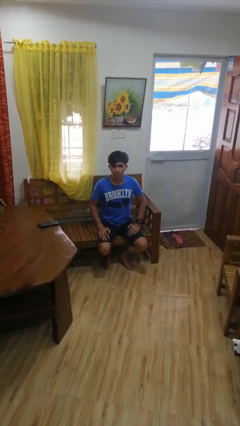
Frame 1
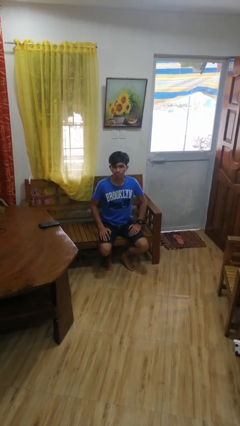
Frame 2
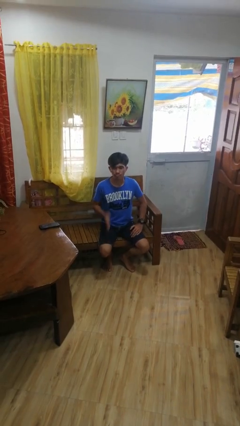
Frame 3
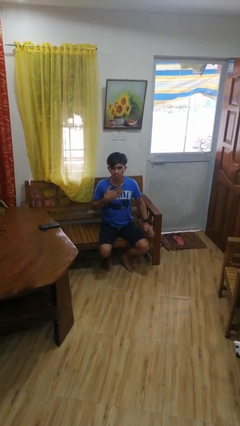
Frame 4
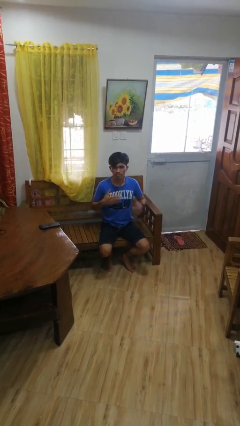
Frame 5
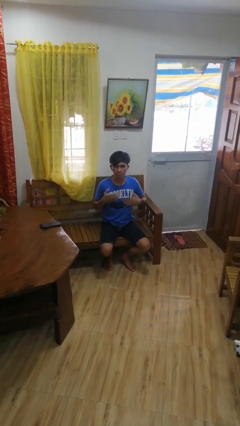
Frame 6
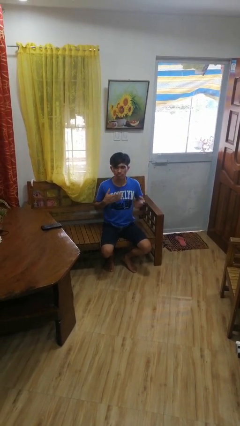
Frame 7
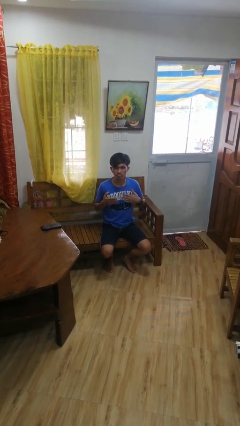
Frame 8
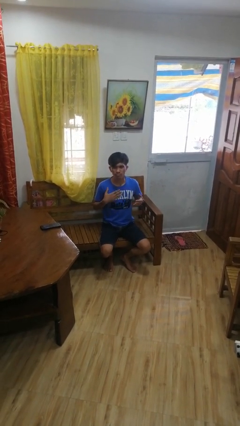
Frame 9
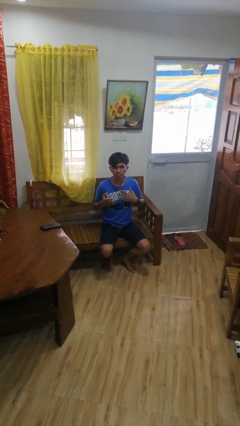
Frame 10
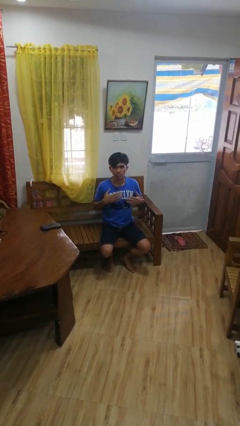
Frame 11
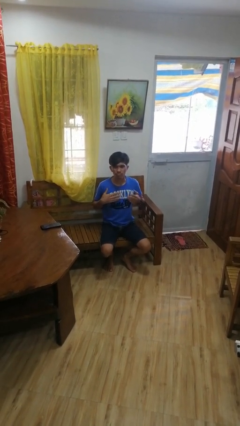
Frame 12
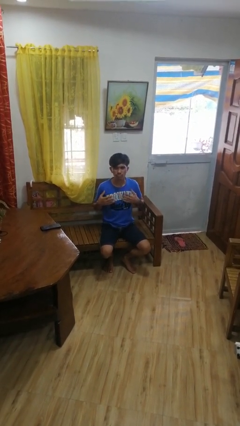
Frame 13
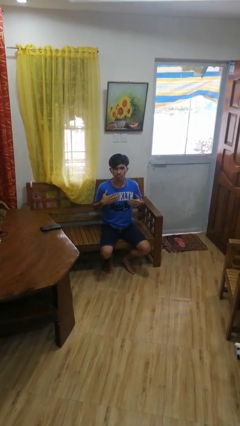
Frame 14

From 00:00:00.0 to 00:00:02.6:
person drums on chest

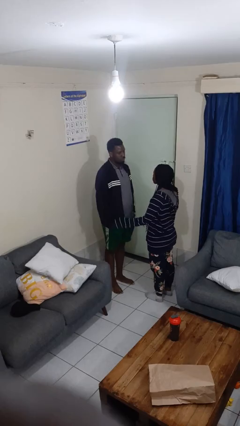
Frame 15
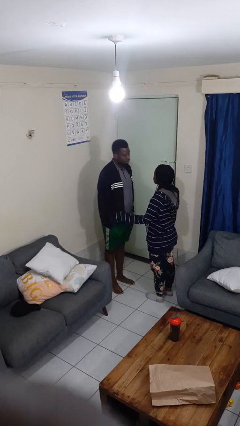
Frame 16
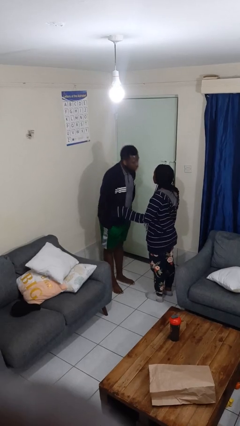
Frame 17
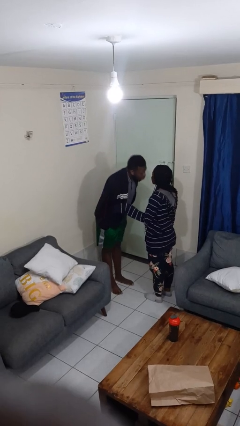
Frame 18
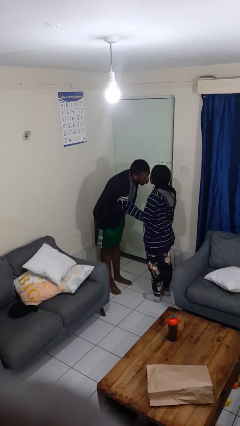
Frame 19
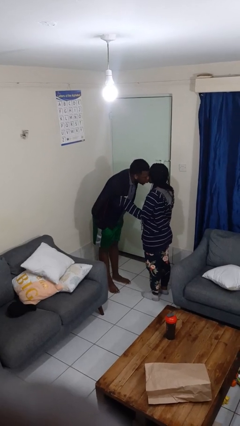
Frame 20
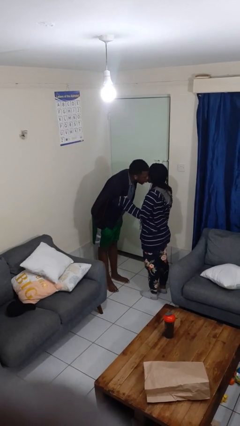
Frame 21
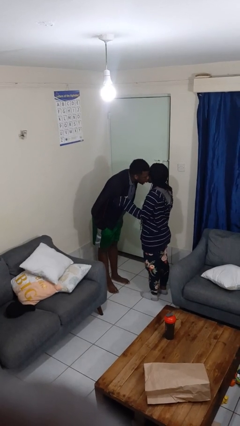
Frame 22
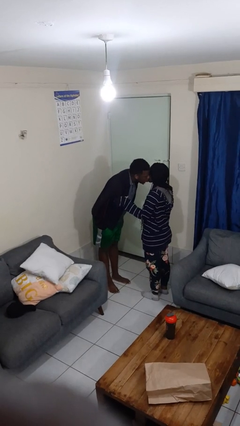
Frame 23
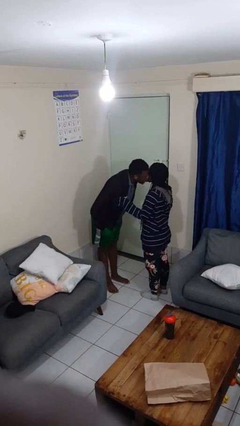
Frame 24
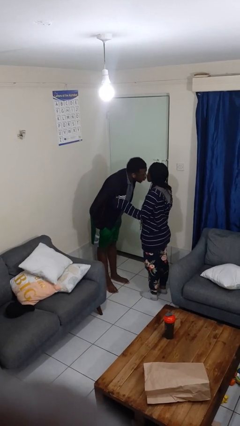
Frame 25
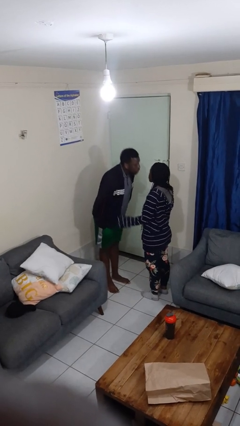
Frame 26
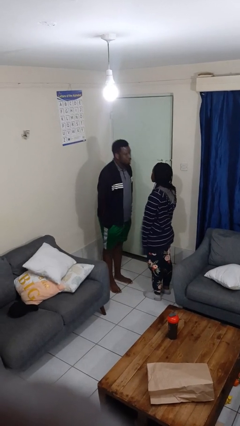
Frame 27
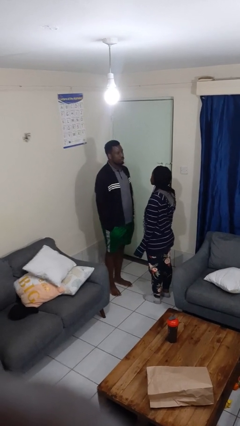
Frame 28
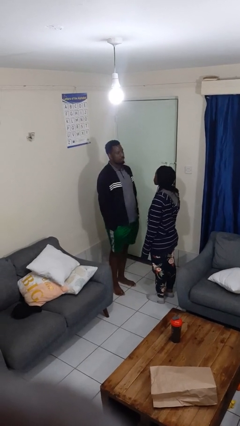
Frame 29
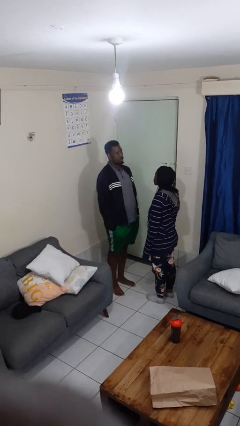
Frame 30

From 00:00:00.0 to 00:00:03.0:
person kisses cheek of person

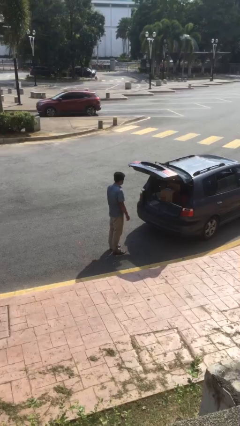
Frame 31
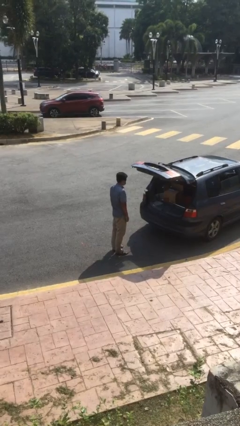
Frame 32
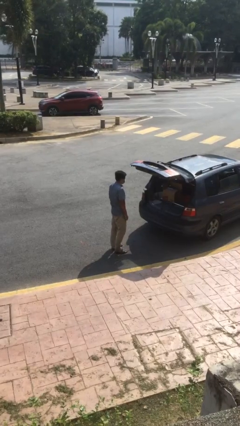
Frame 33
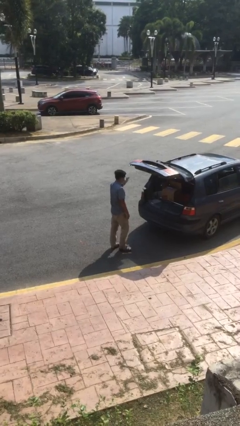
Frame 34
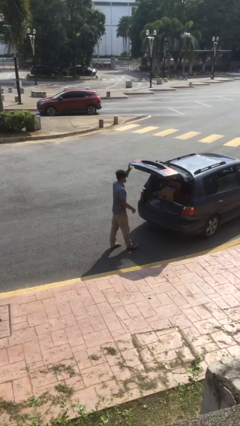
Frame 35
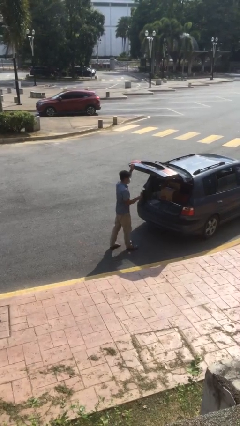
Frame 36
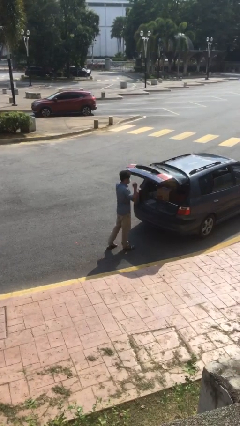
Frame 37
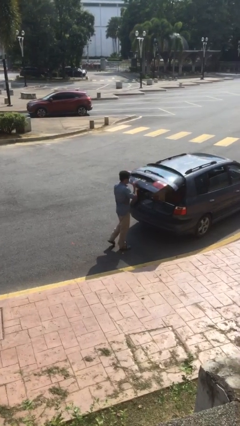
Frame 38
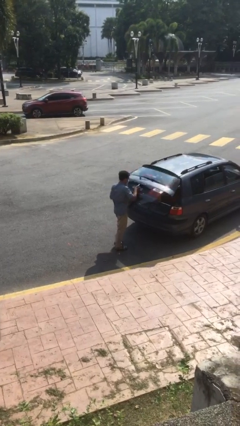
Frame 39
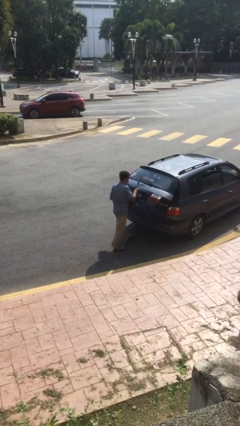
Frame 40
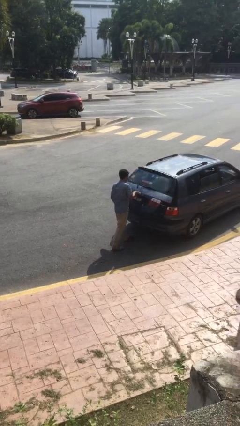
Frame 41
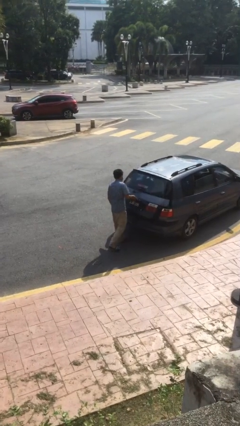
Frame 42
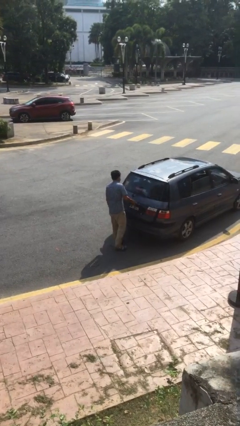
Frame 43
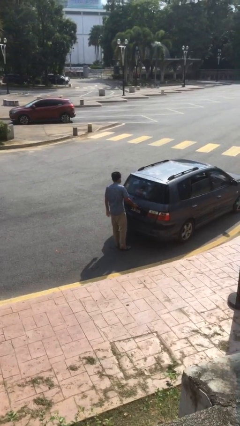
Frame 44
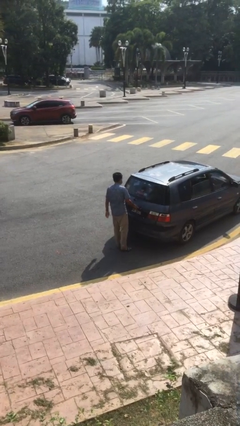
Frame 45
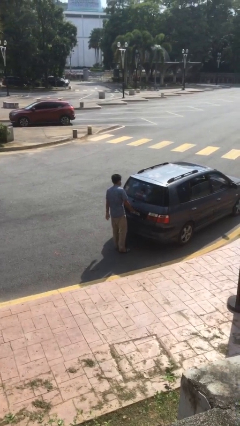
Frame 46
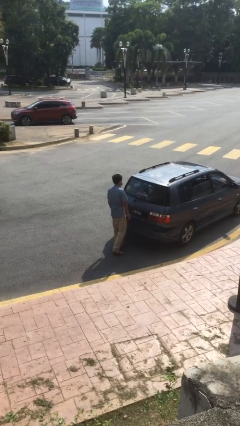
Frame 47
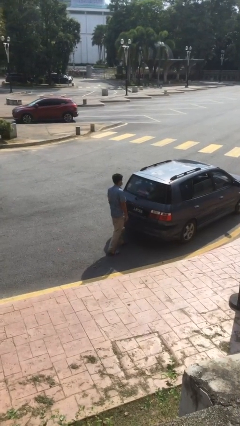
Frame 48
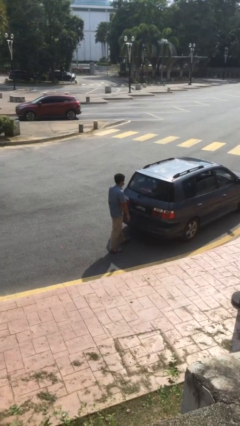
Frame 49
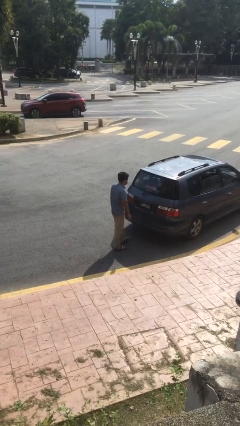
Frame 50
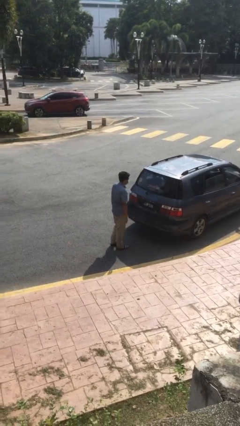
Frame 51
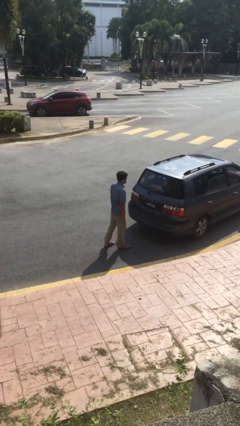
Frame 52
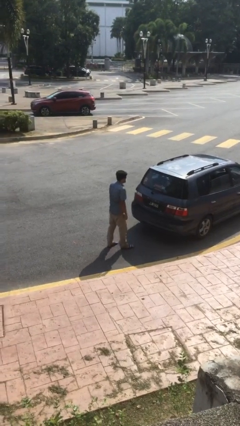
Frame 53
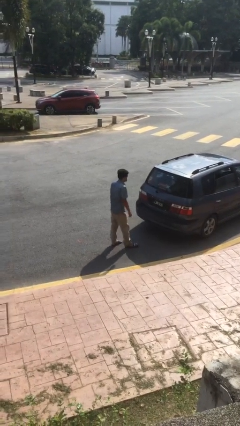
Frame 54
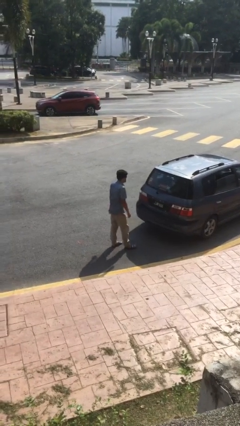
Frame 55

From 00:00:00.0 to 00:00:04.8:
person closes car trunk

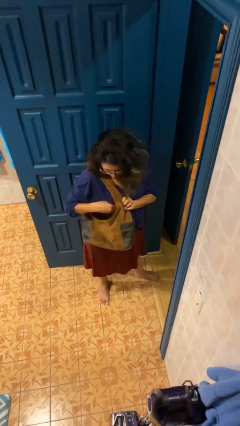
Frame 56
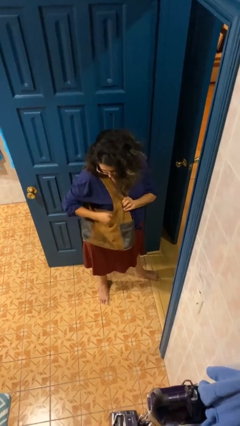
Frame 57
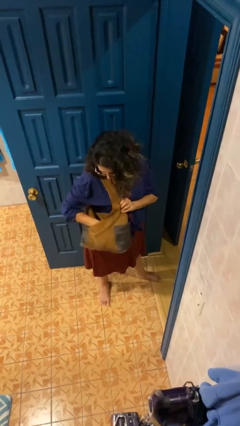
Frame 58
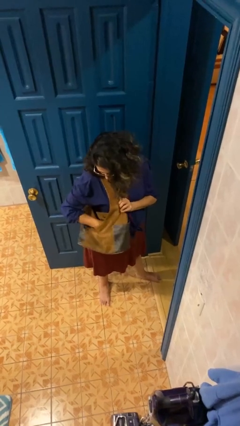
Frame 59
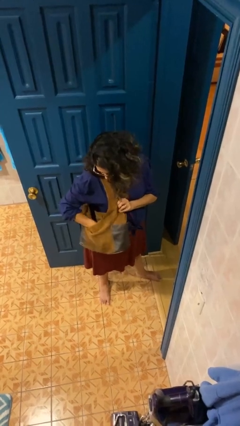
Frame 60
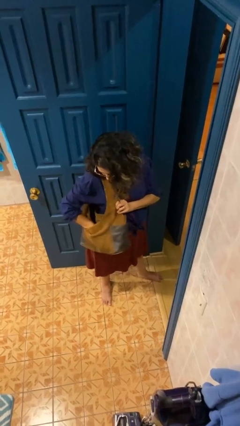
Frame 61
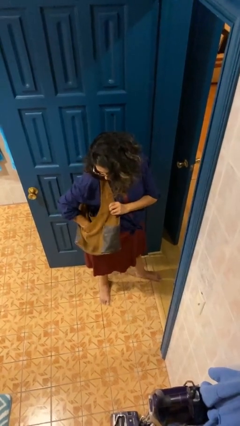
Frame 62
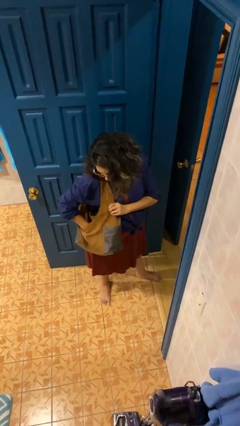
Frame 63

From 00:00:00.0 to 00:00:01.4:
person searches in purse

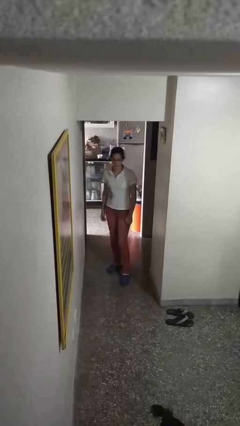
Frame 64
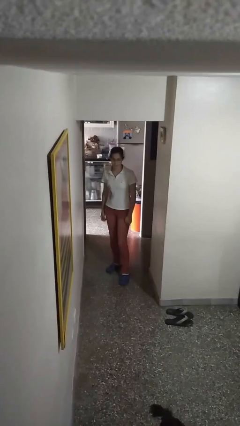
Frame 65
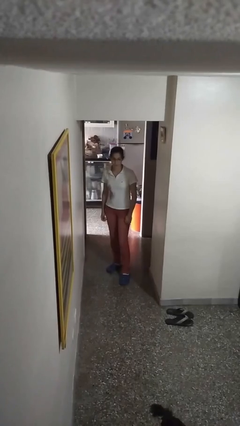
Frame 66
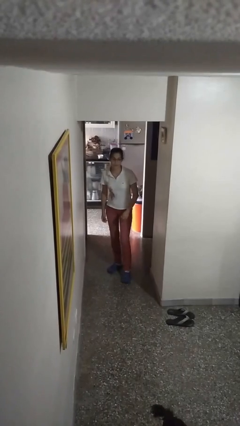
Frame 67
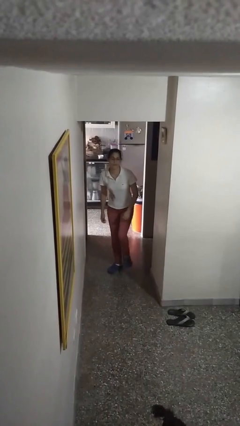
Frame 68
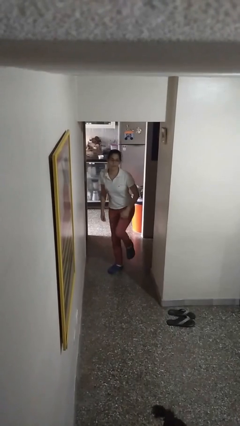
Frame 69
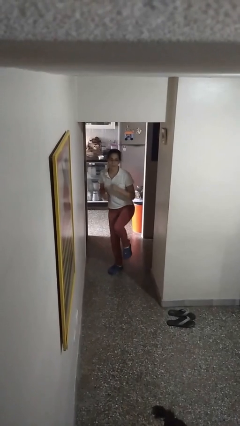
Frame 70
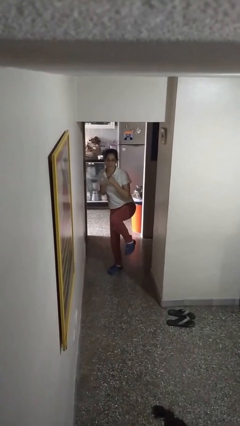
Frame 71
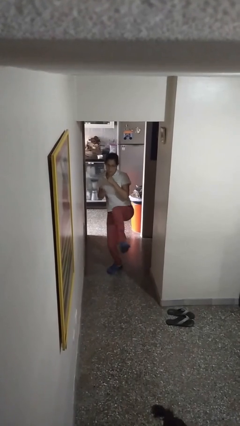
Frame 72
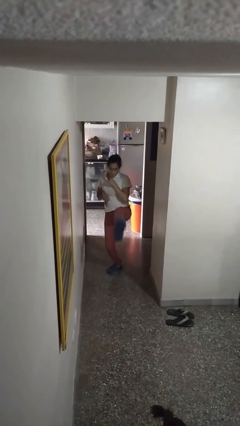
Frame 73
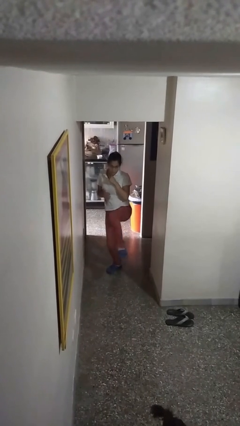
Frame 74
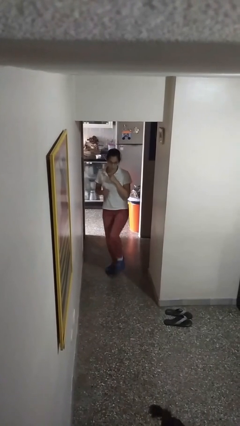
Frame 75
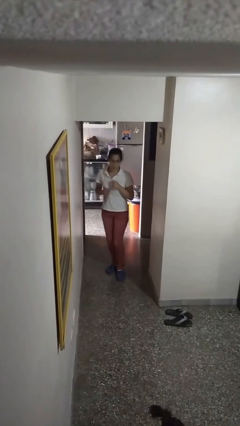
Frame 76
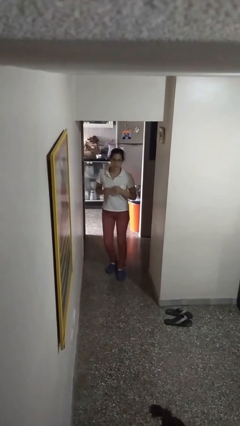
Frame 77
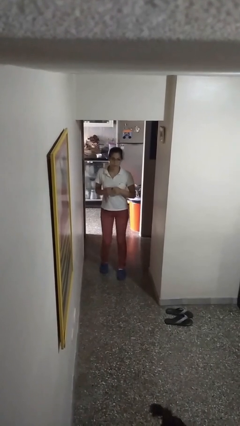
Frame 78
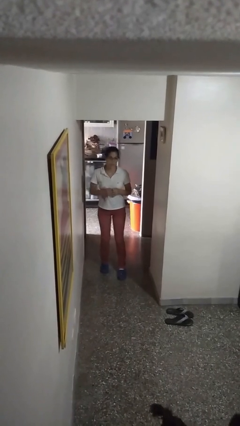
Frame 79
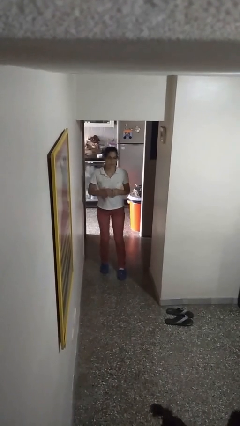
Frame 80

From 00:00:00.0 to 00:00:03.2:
person karate kicks

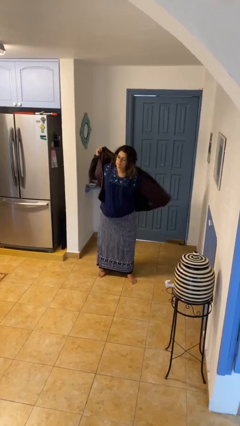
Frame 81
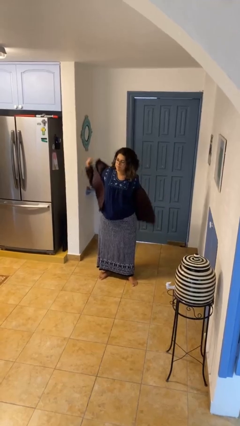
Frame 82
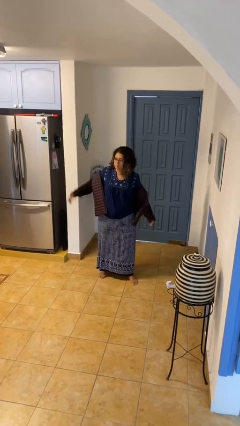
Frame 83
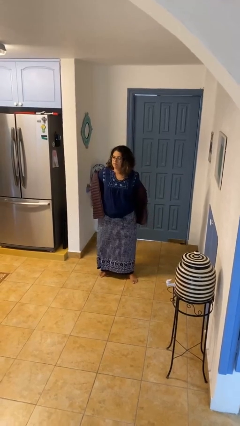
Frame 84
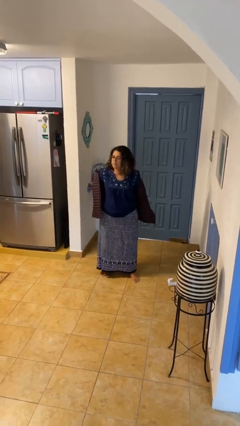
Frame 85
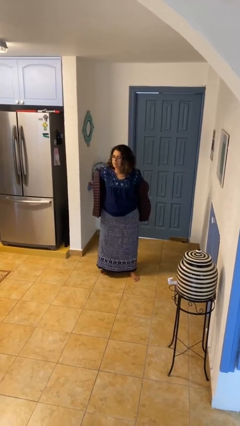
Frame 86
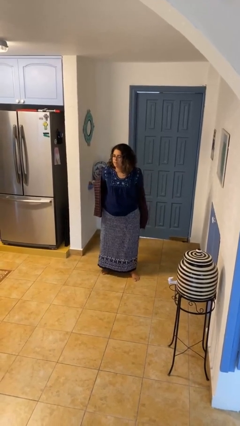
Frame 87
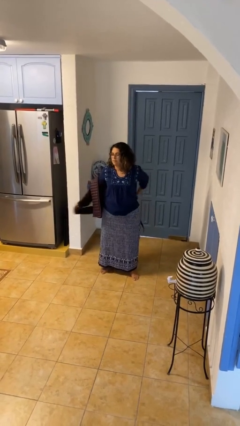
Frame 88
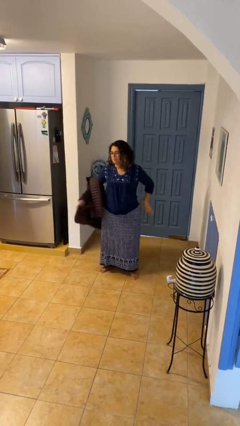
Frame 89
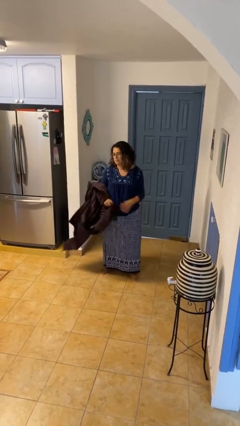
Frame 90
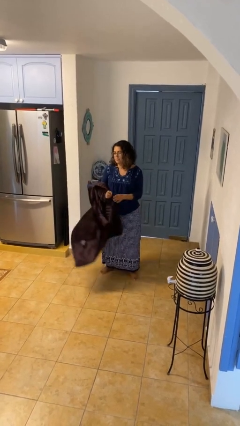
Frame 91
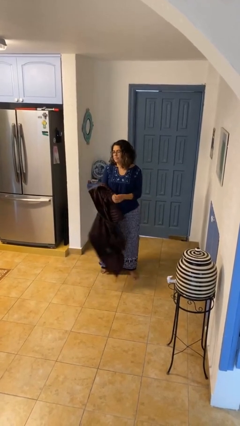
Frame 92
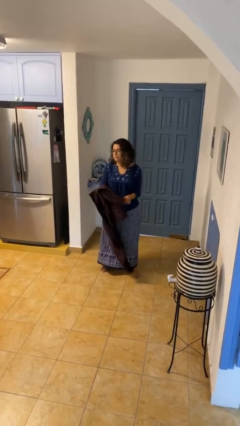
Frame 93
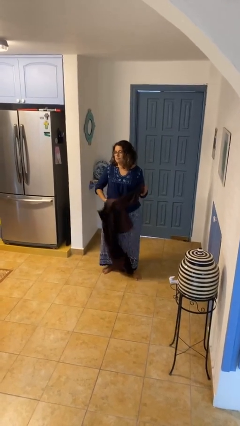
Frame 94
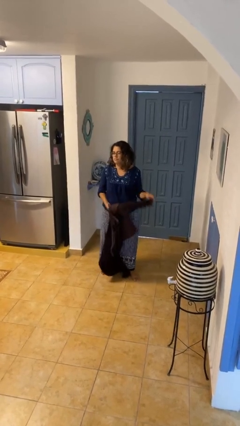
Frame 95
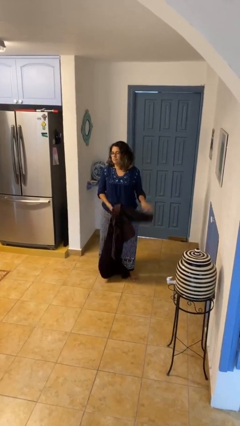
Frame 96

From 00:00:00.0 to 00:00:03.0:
person takes off jacket
